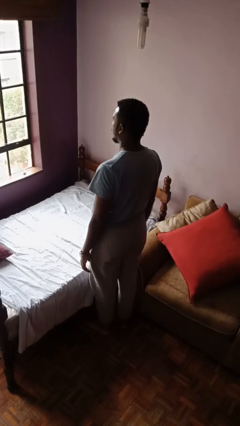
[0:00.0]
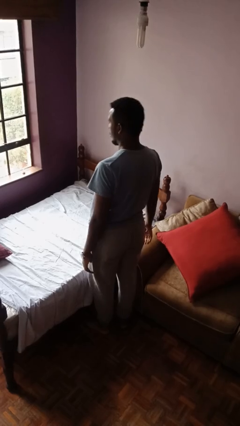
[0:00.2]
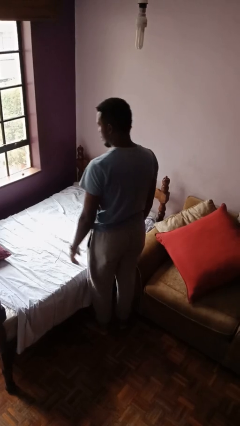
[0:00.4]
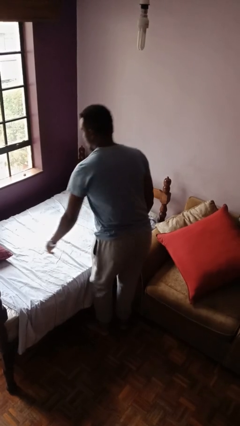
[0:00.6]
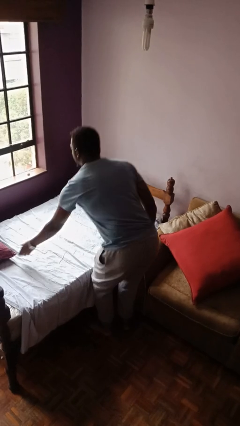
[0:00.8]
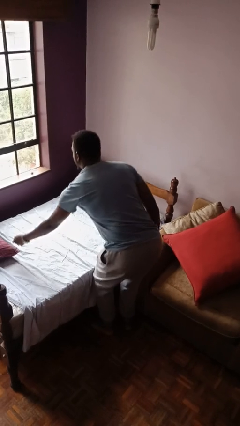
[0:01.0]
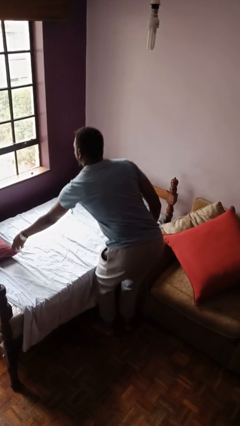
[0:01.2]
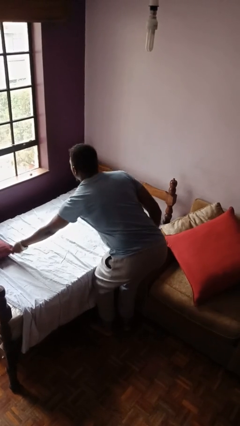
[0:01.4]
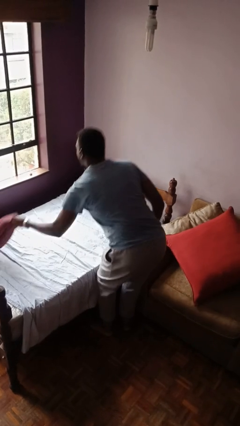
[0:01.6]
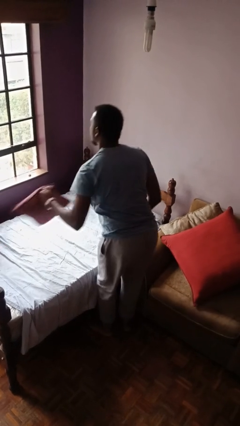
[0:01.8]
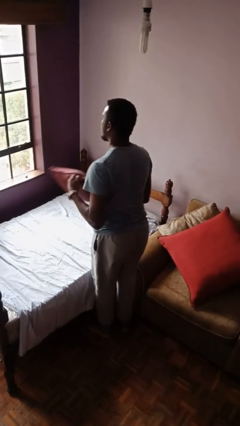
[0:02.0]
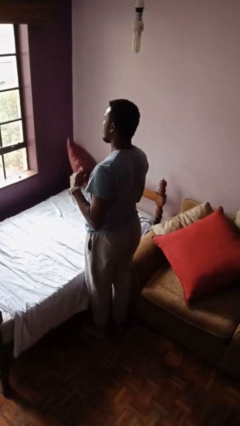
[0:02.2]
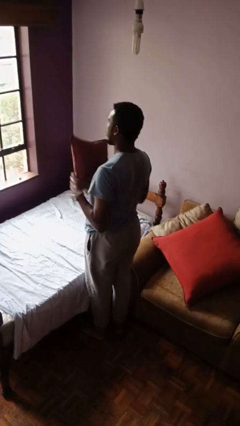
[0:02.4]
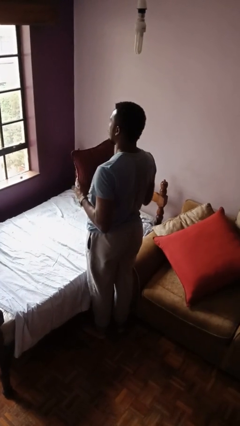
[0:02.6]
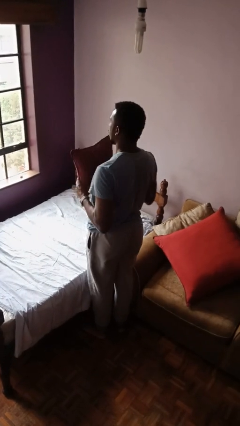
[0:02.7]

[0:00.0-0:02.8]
person picks up object from bed

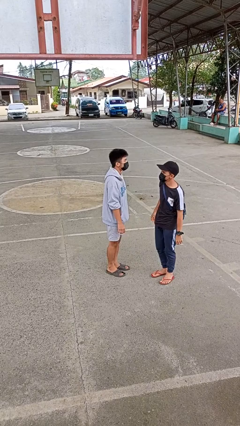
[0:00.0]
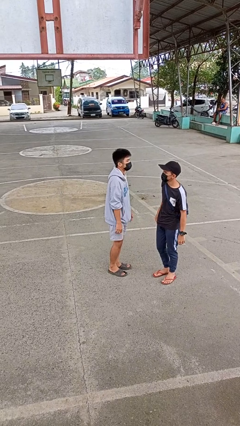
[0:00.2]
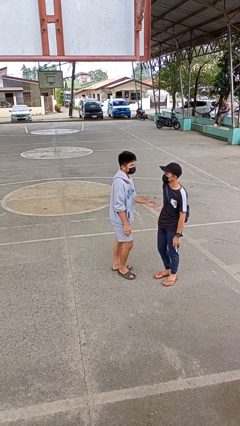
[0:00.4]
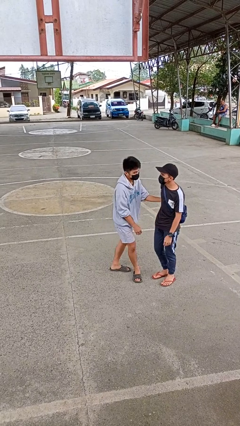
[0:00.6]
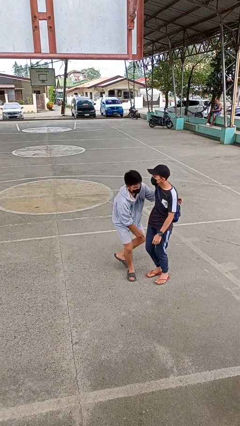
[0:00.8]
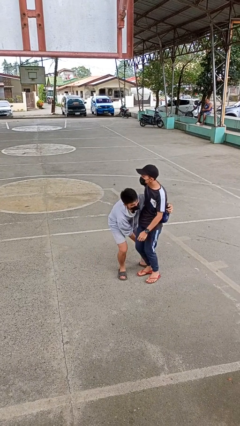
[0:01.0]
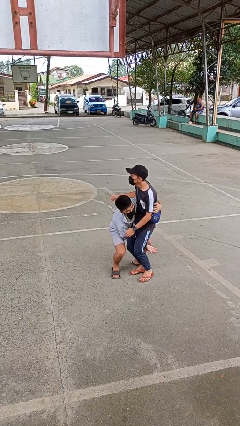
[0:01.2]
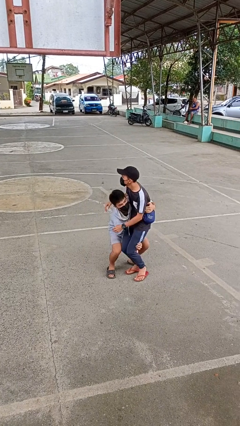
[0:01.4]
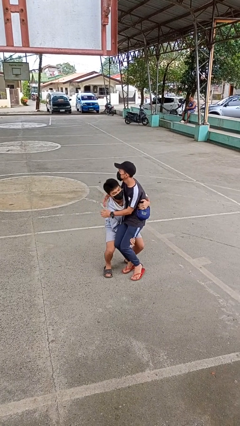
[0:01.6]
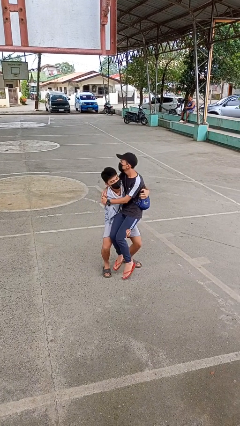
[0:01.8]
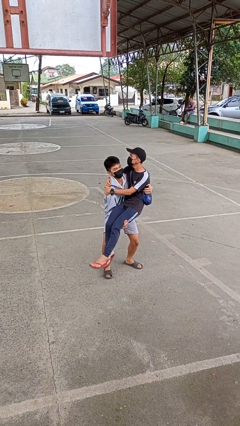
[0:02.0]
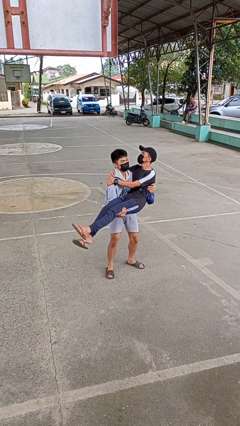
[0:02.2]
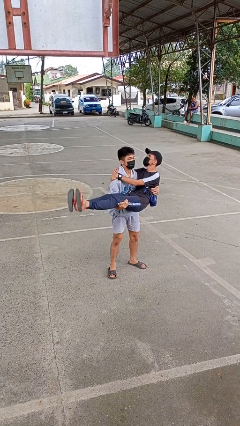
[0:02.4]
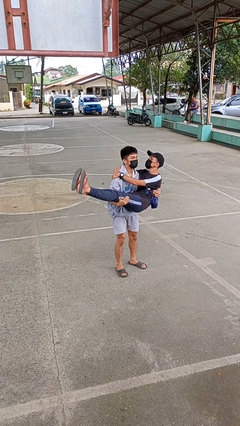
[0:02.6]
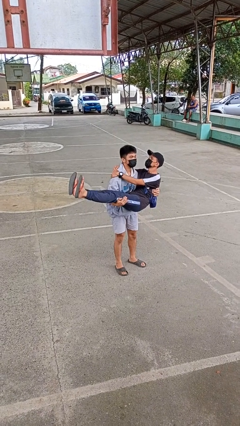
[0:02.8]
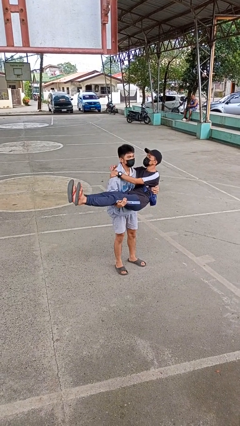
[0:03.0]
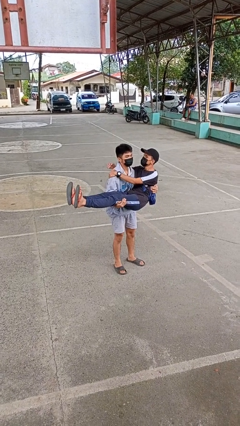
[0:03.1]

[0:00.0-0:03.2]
person picks up person

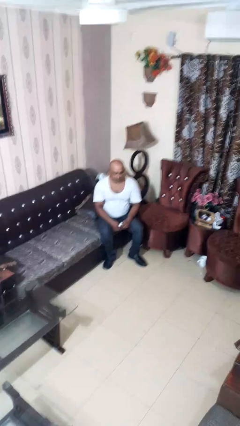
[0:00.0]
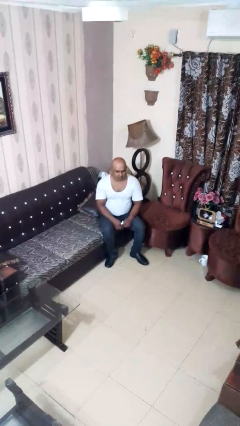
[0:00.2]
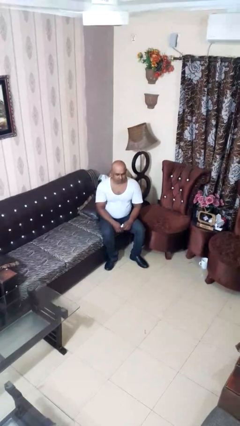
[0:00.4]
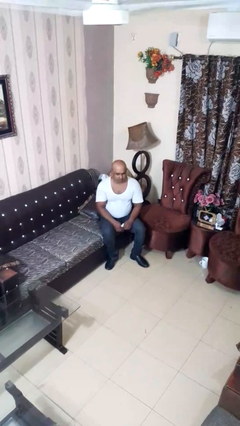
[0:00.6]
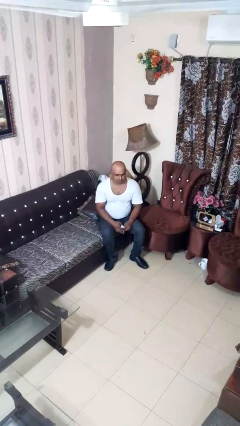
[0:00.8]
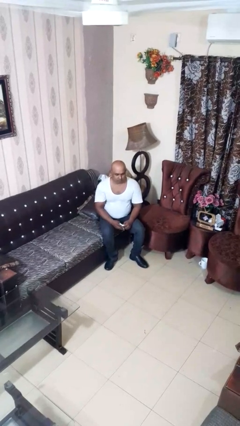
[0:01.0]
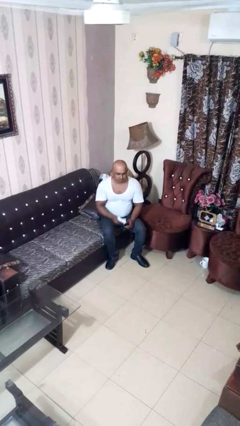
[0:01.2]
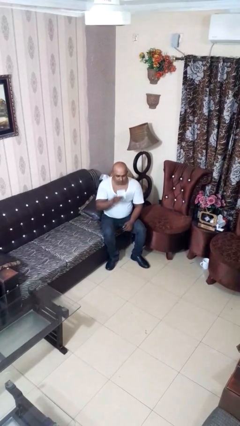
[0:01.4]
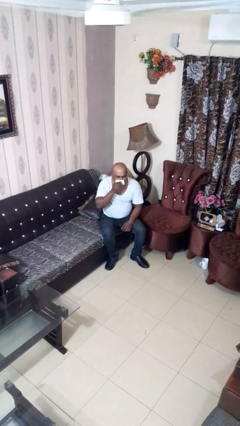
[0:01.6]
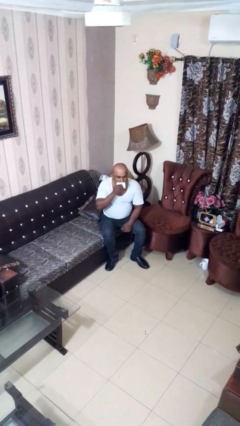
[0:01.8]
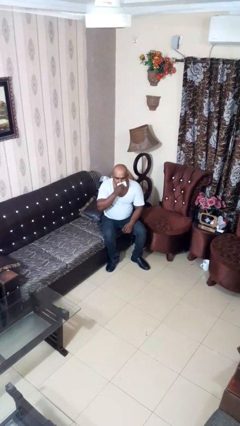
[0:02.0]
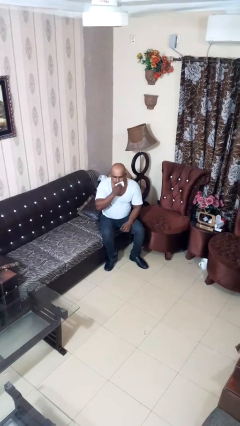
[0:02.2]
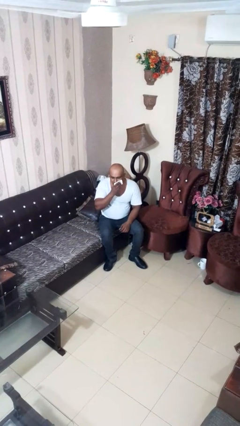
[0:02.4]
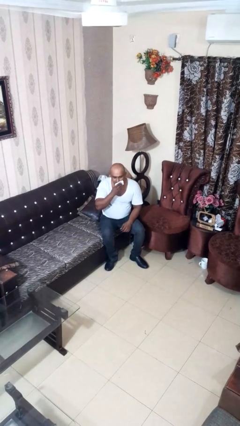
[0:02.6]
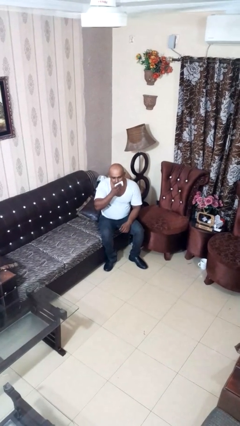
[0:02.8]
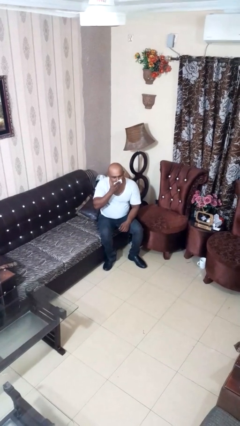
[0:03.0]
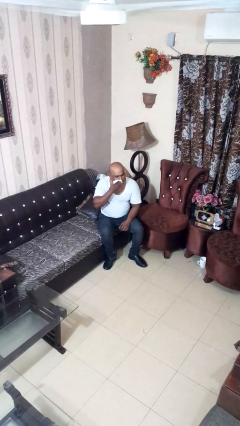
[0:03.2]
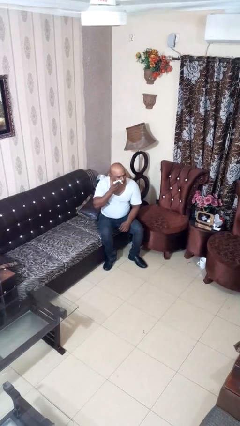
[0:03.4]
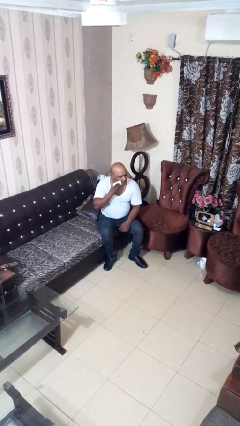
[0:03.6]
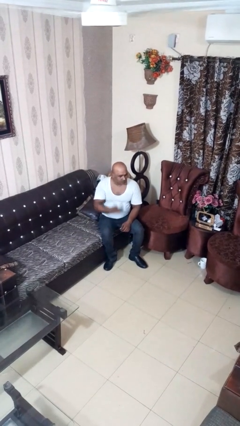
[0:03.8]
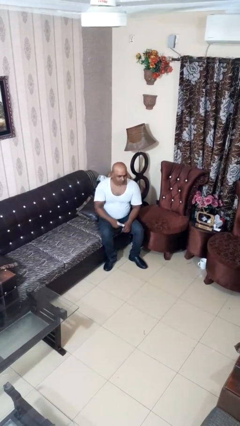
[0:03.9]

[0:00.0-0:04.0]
person wipes mouth with napkin

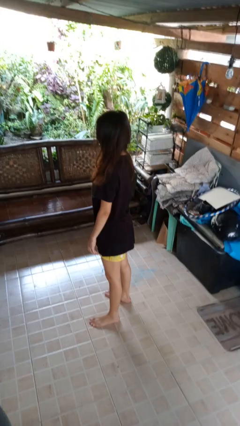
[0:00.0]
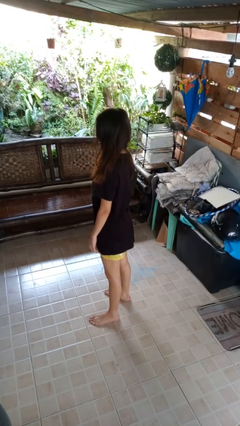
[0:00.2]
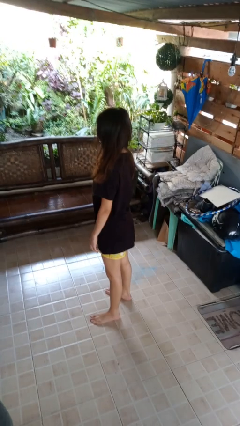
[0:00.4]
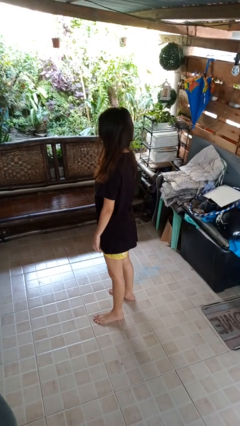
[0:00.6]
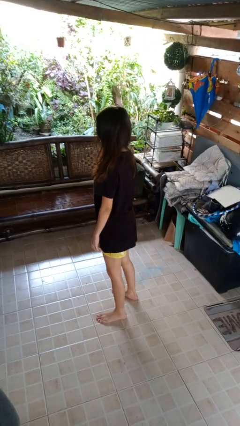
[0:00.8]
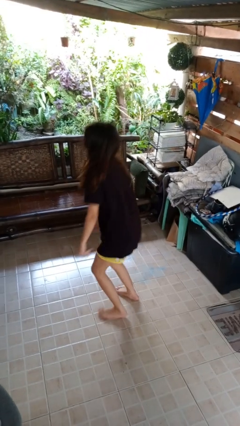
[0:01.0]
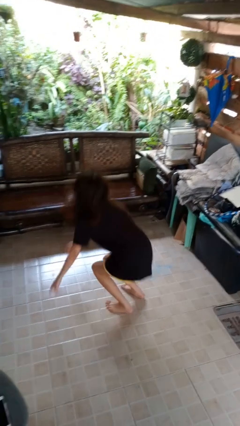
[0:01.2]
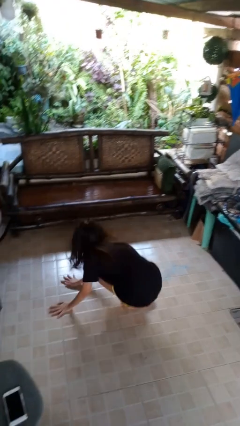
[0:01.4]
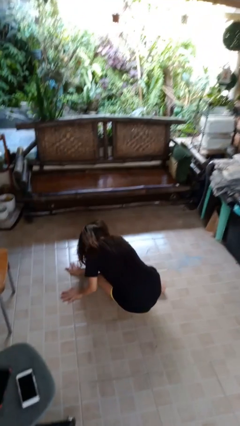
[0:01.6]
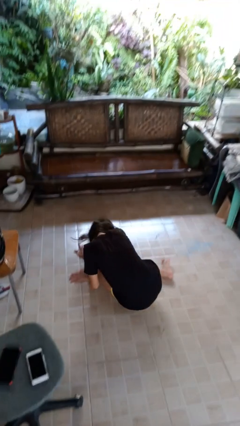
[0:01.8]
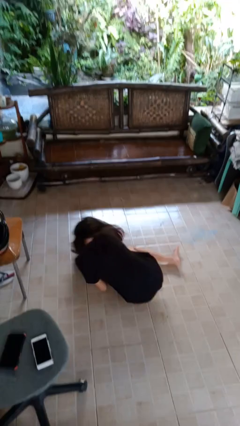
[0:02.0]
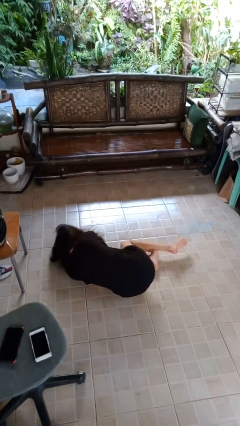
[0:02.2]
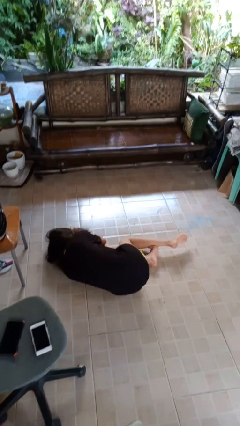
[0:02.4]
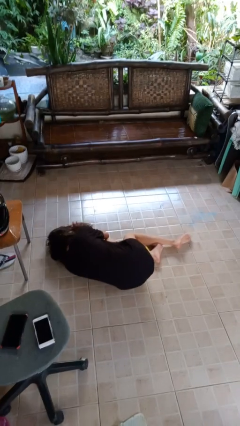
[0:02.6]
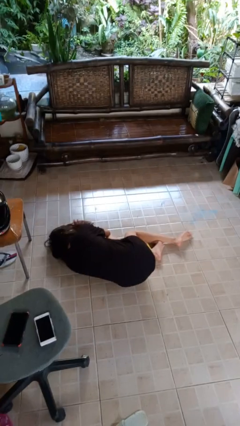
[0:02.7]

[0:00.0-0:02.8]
person falls while standing

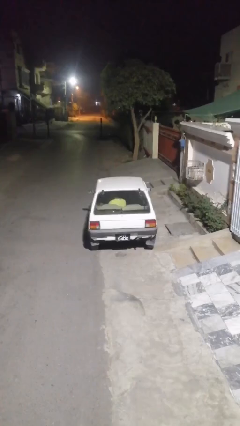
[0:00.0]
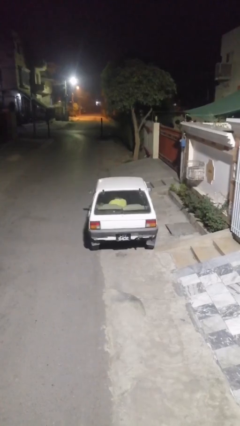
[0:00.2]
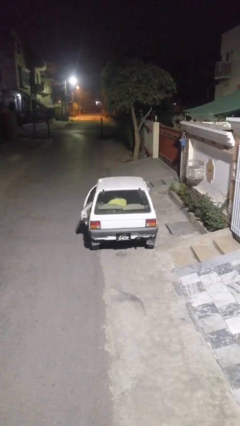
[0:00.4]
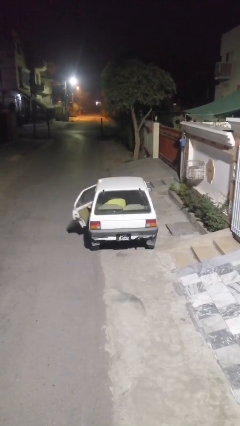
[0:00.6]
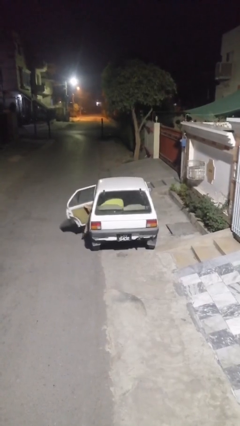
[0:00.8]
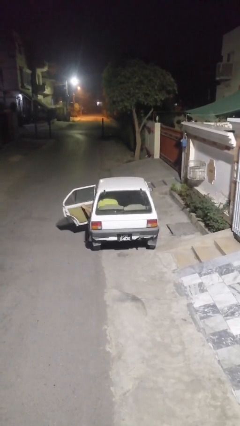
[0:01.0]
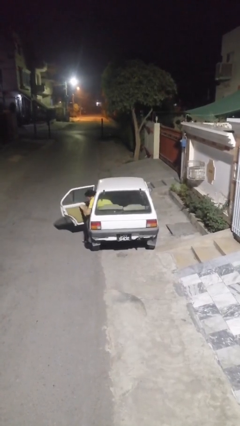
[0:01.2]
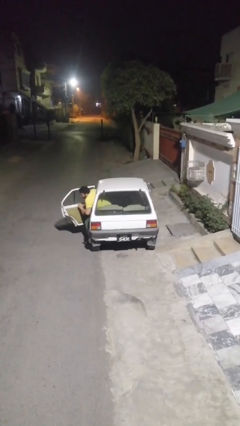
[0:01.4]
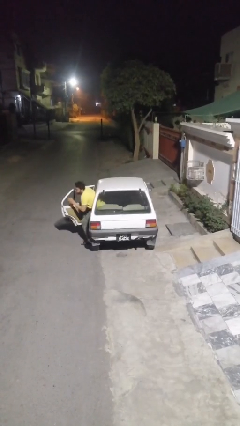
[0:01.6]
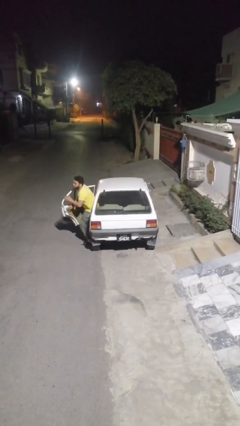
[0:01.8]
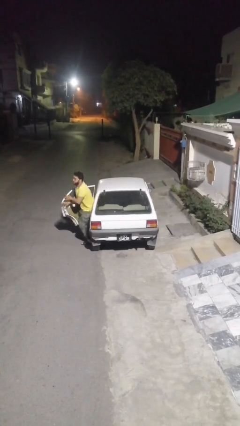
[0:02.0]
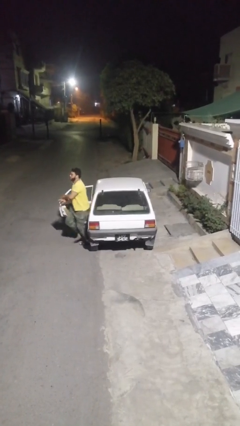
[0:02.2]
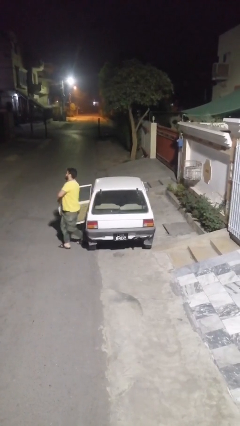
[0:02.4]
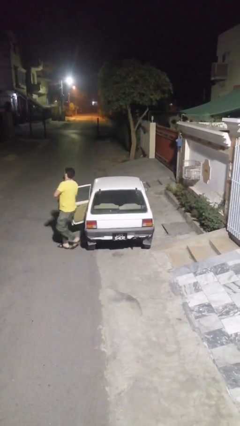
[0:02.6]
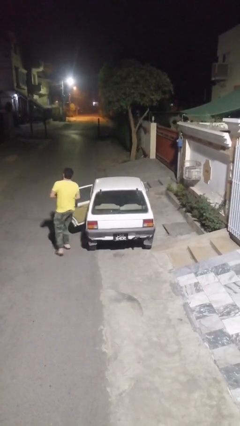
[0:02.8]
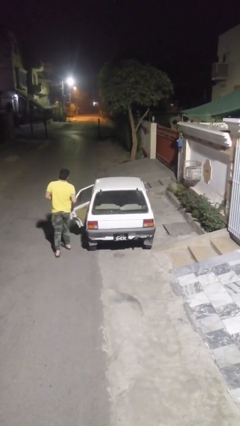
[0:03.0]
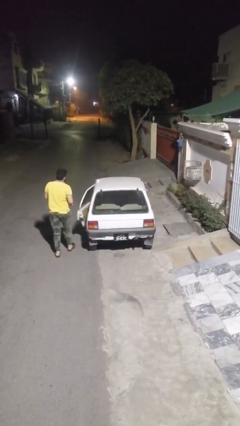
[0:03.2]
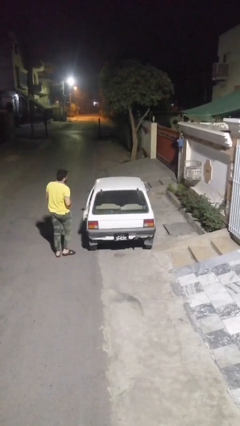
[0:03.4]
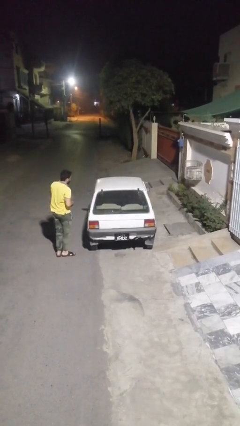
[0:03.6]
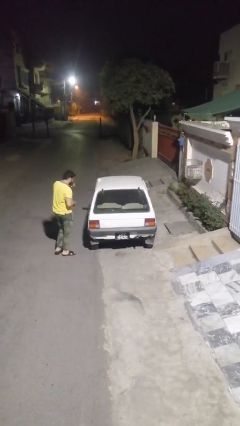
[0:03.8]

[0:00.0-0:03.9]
car drops off person

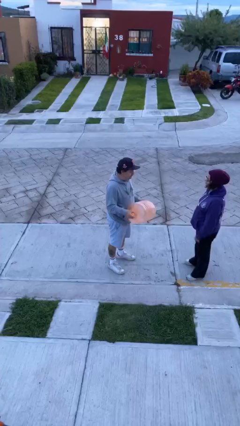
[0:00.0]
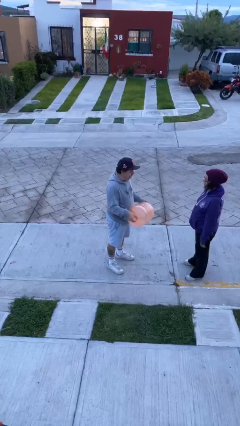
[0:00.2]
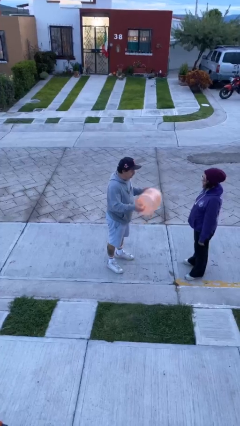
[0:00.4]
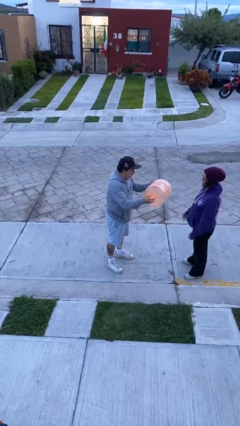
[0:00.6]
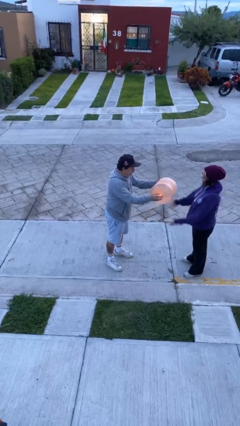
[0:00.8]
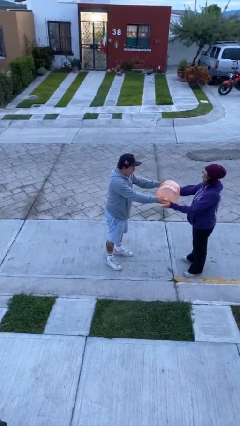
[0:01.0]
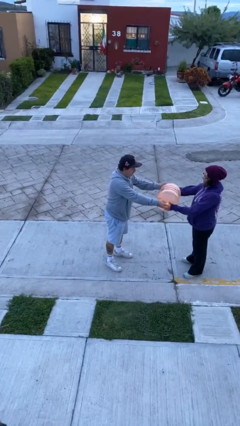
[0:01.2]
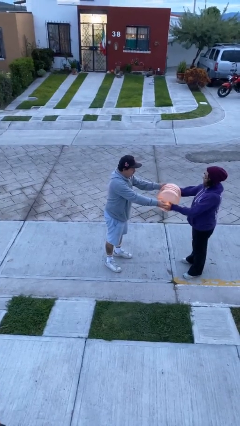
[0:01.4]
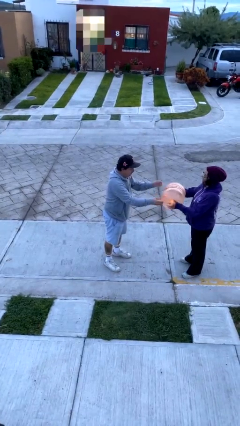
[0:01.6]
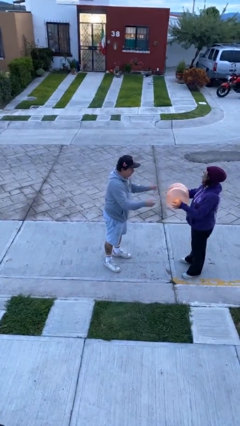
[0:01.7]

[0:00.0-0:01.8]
person transfers object to person
